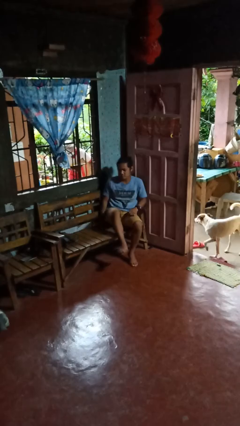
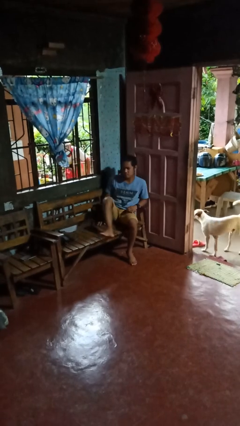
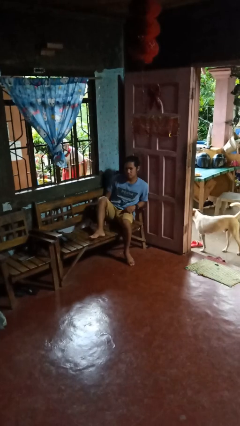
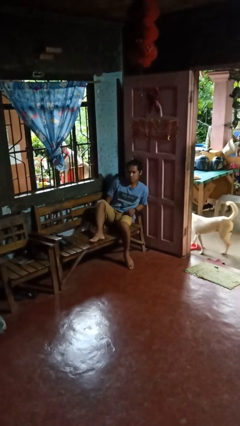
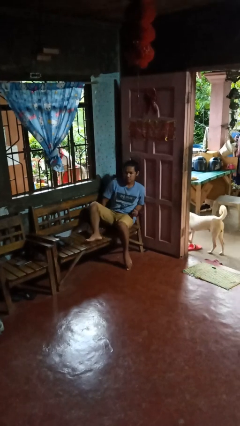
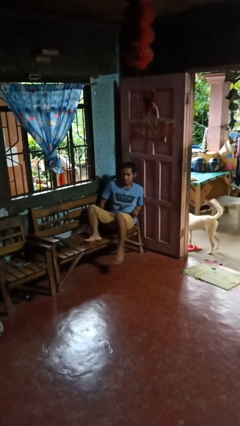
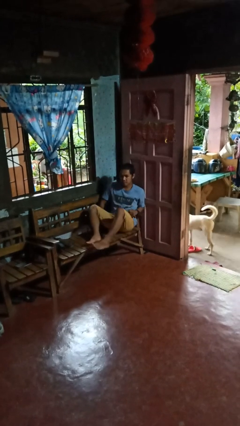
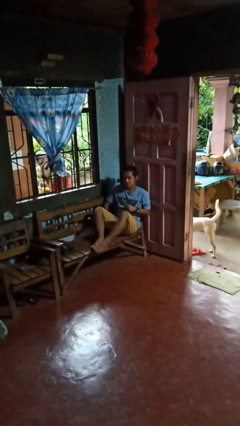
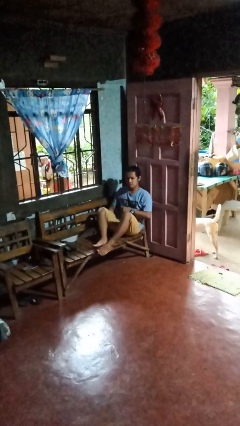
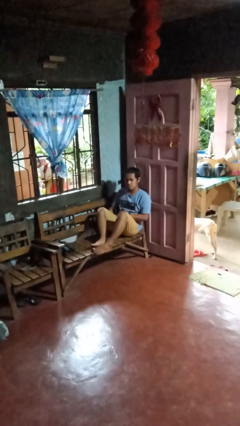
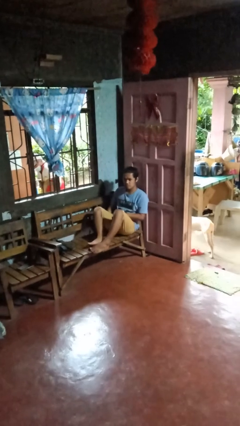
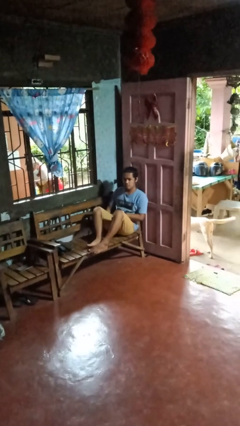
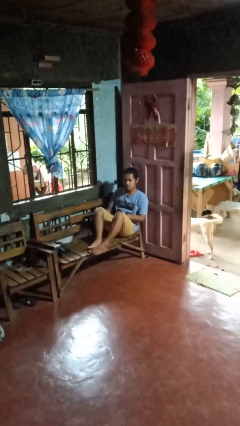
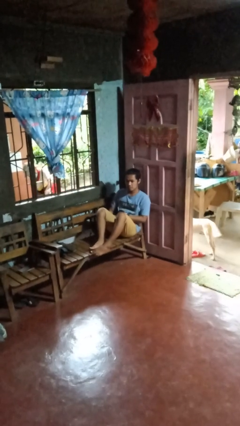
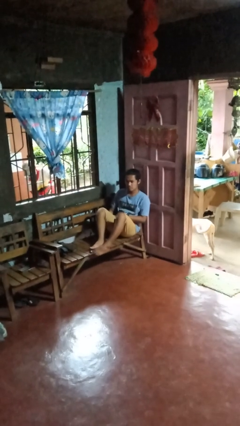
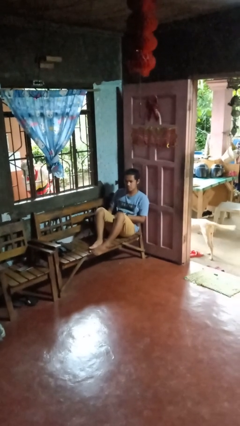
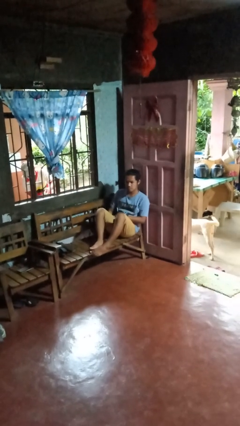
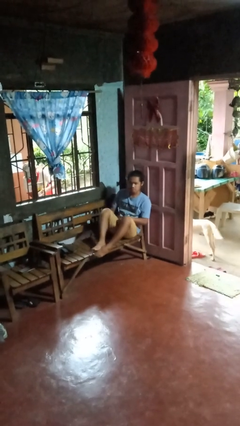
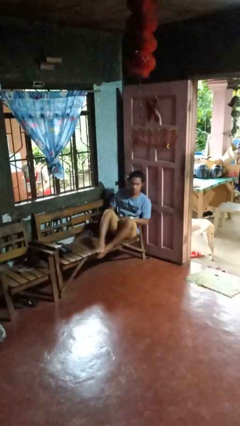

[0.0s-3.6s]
person sits down

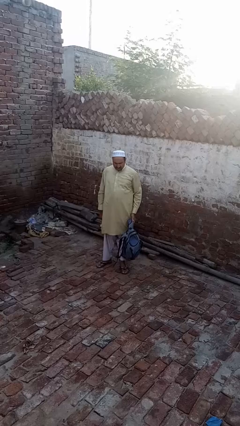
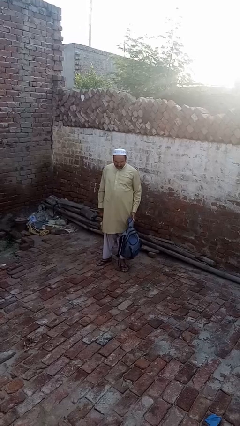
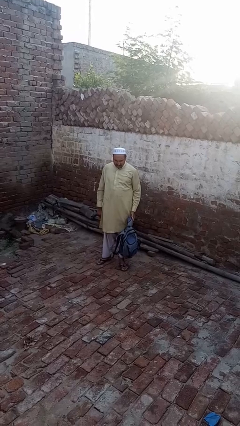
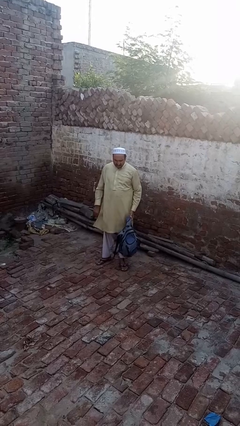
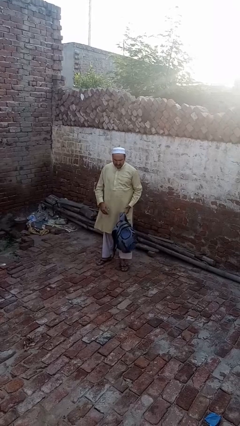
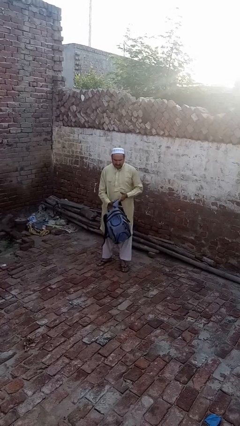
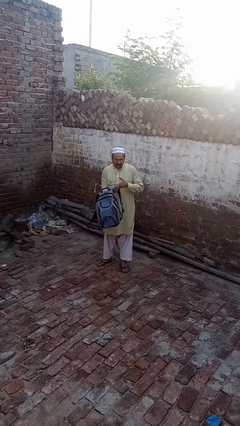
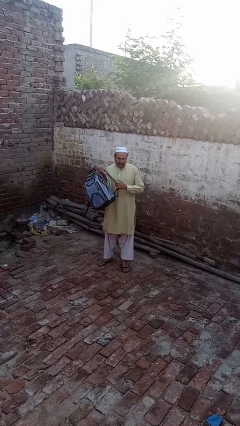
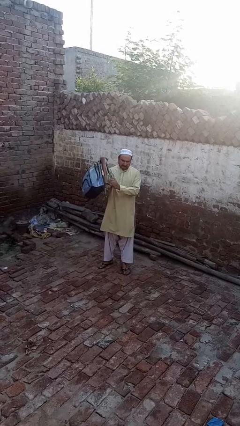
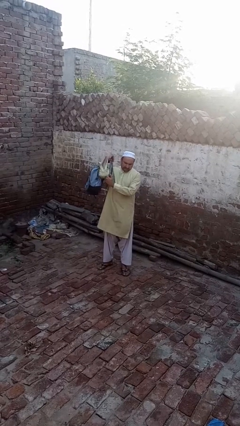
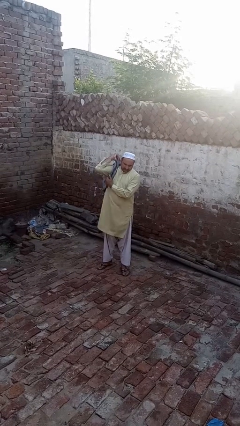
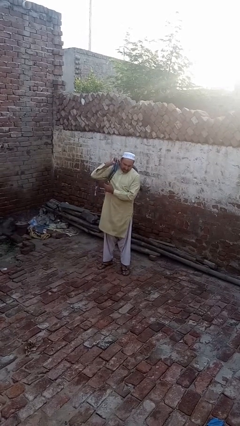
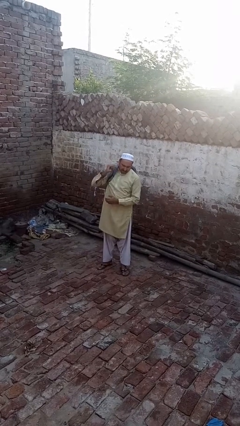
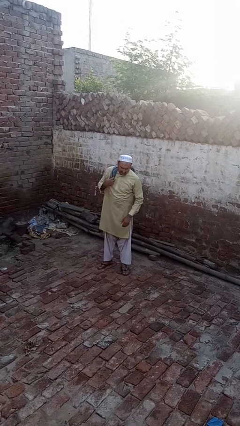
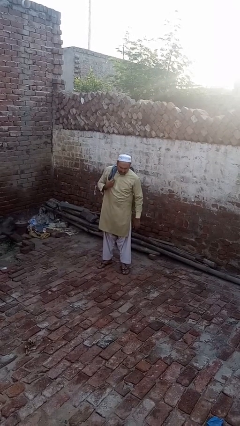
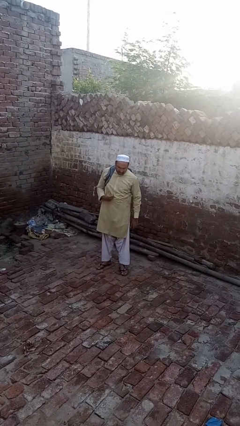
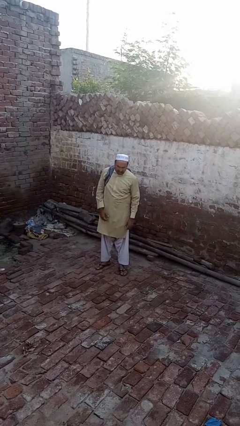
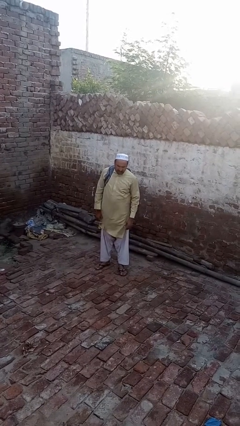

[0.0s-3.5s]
person puts on backpack

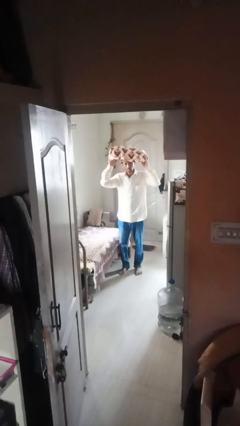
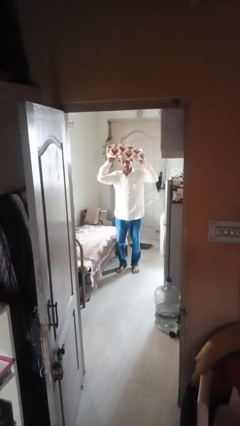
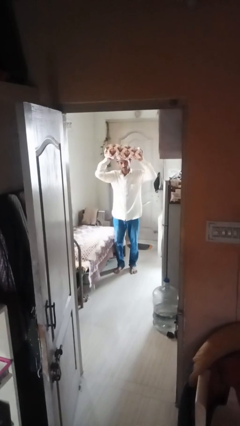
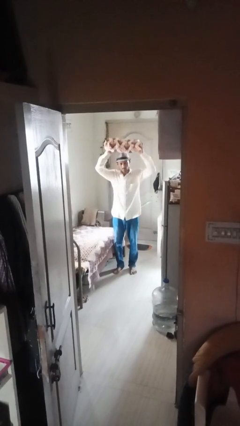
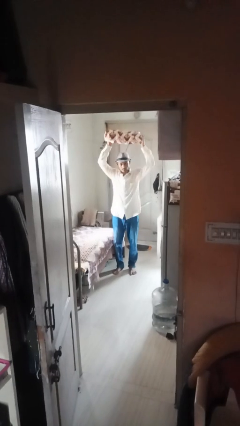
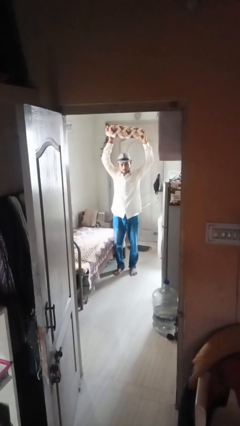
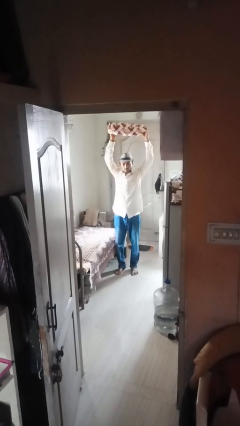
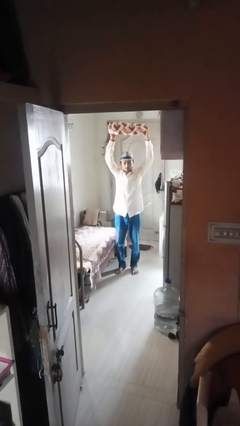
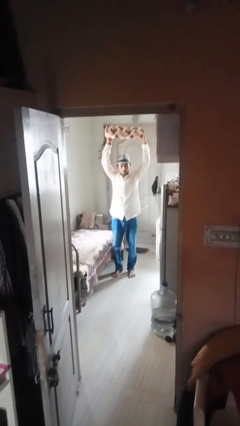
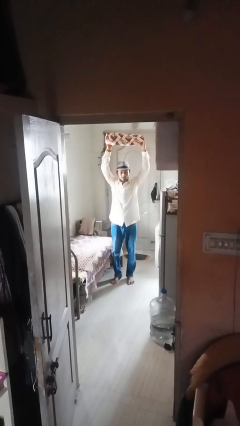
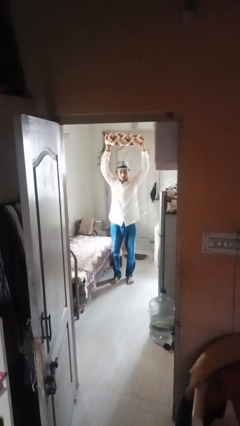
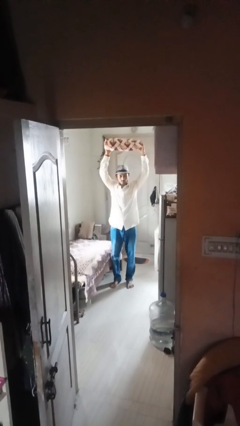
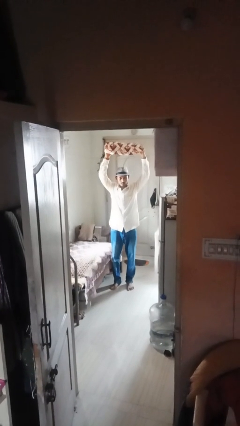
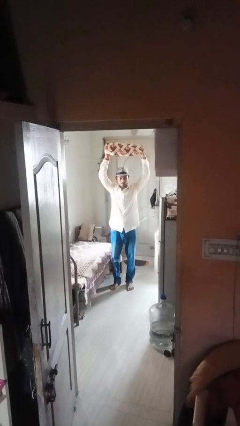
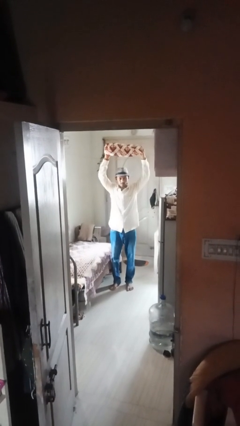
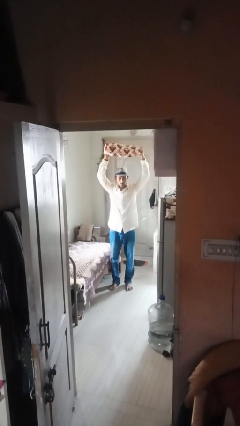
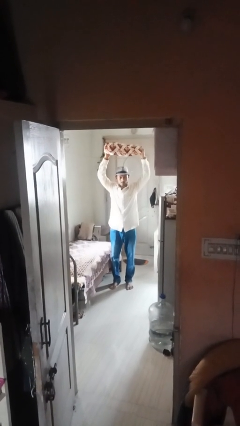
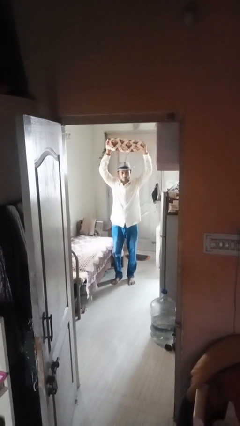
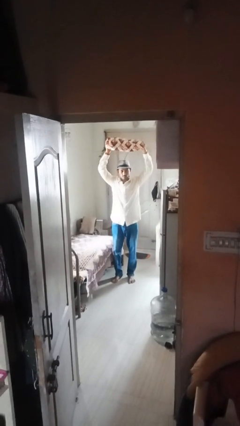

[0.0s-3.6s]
person holds object above head

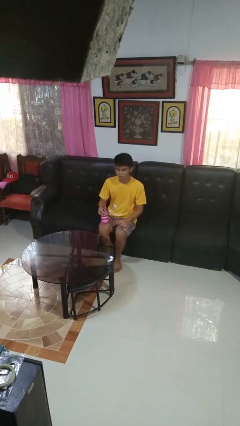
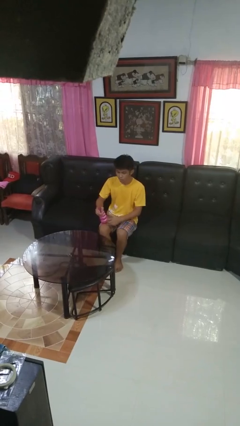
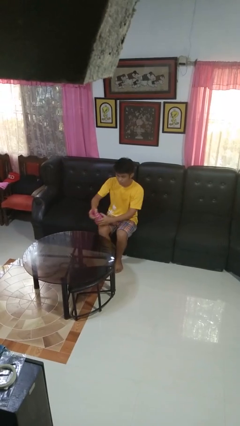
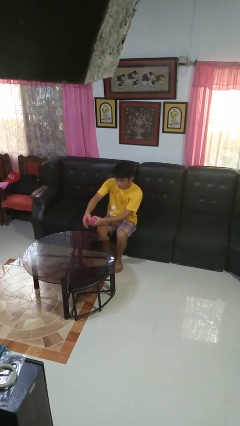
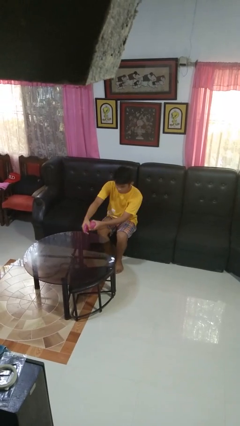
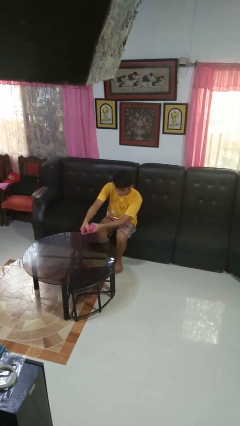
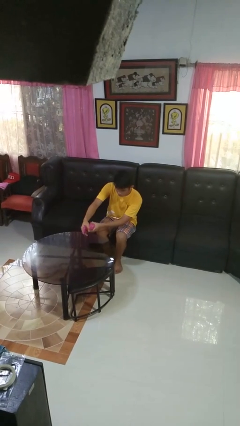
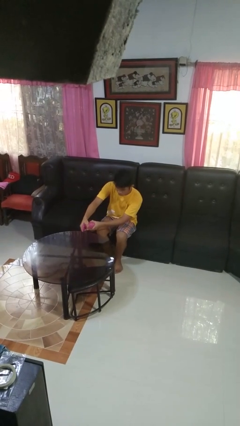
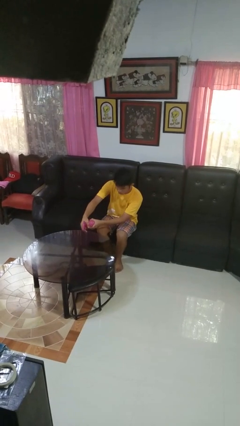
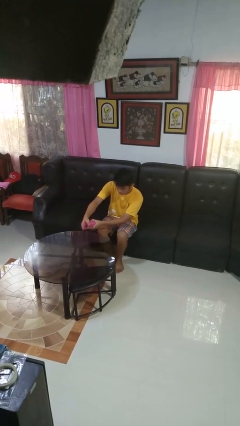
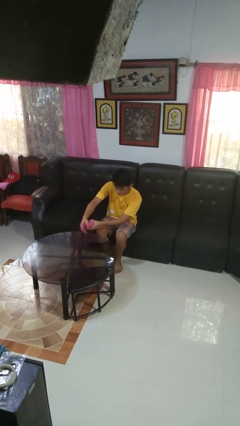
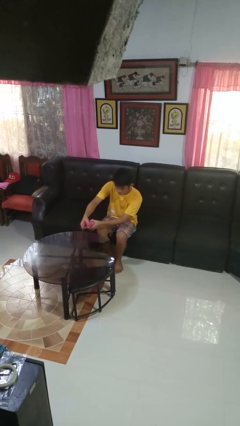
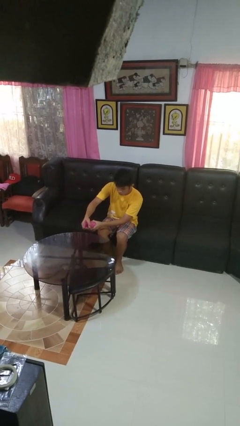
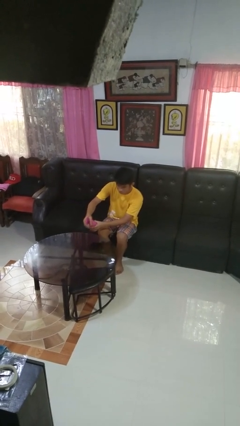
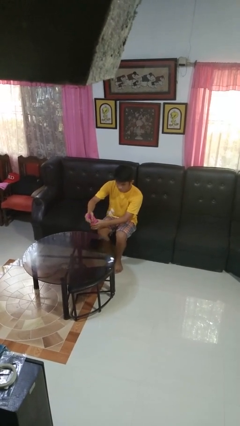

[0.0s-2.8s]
person sprays from bottle

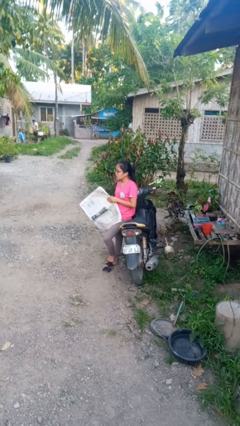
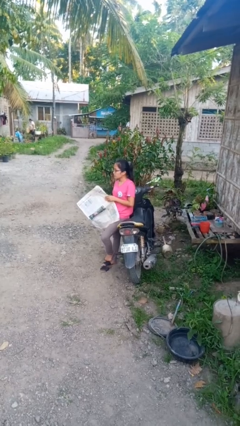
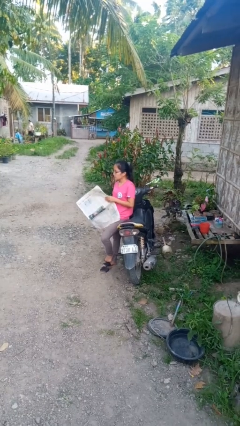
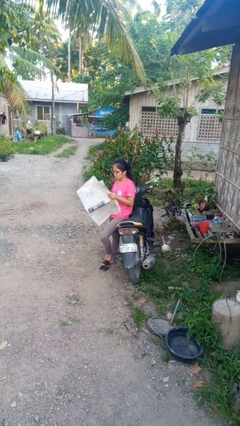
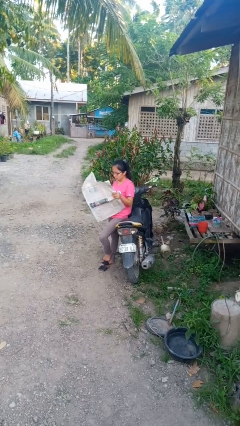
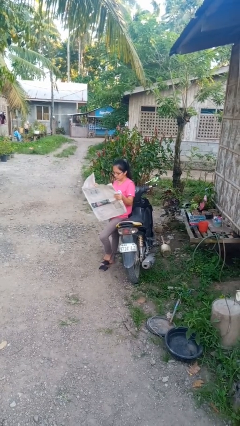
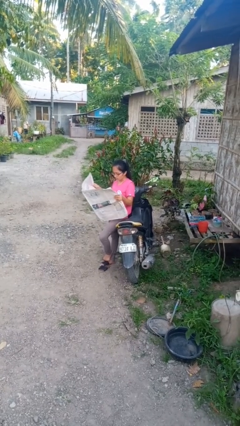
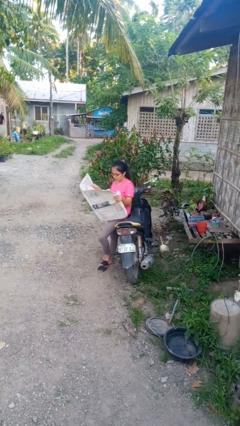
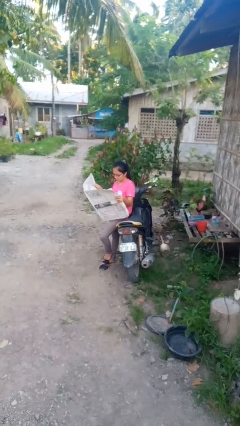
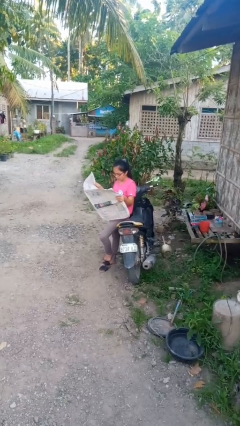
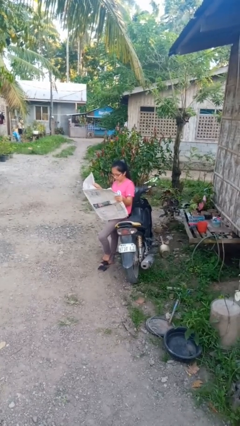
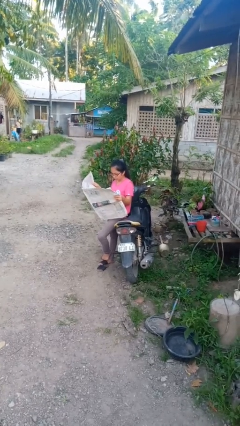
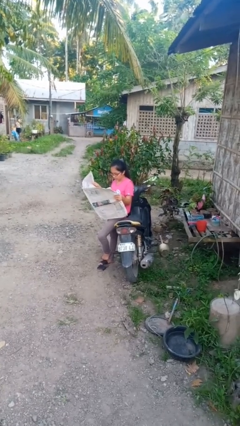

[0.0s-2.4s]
person reads newspaper

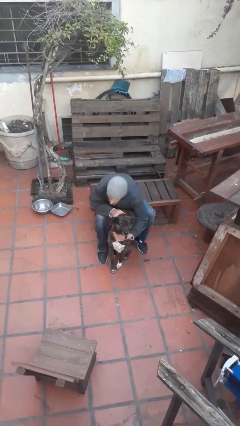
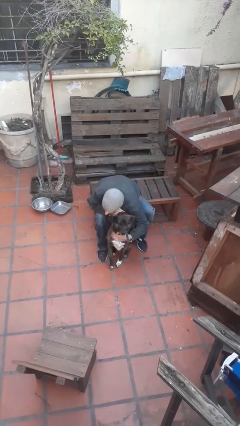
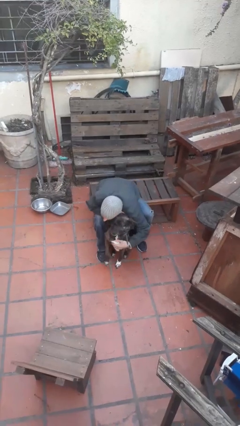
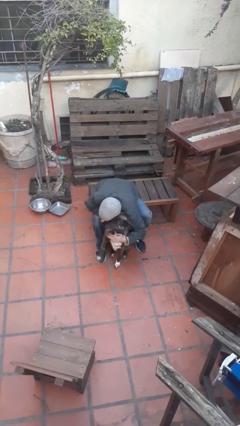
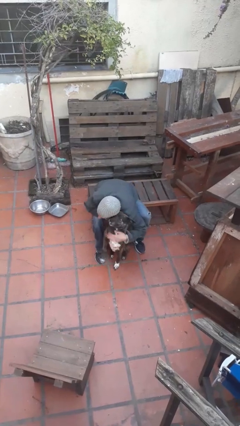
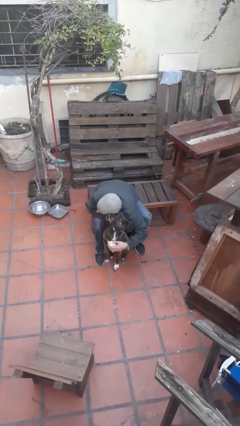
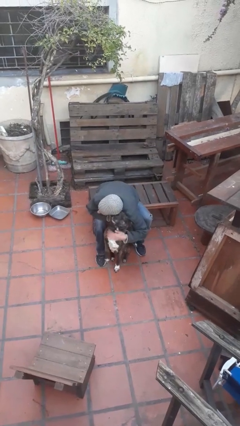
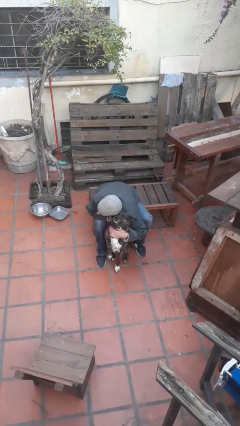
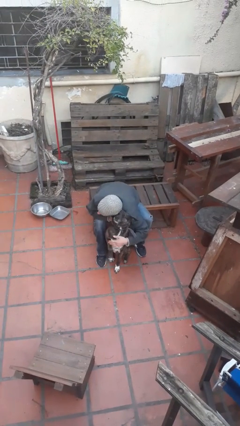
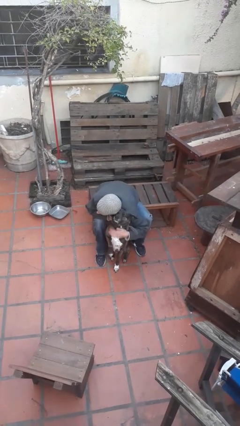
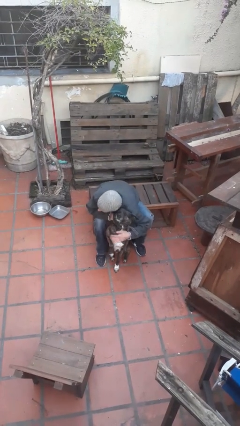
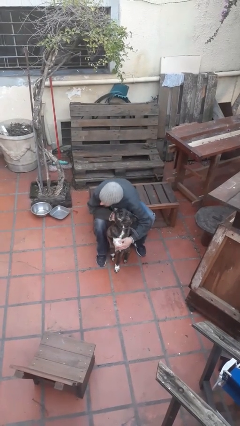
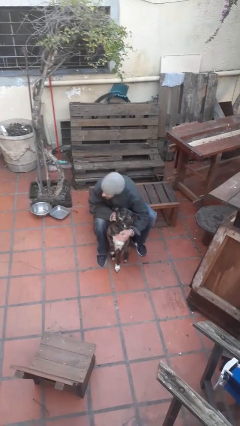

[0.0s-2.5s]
person hugs dog
